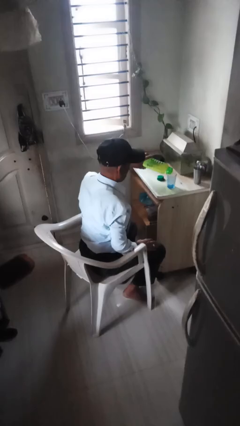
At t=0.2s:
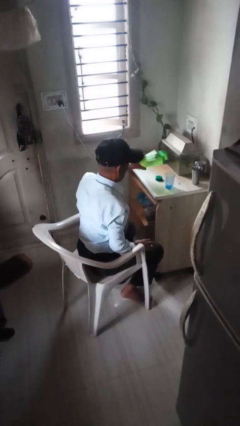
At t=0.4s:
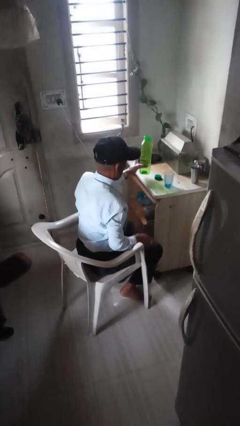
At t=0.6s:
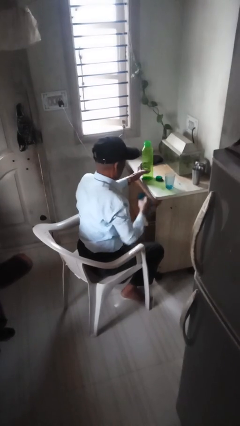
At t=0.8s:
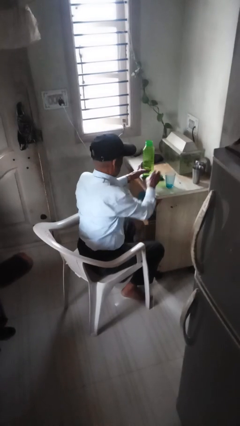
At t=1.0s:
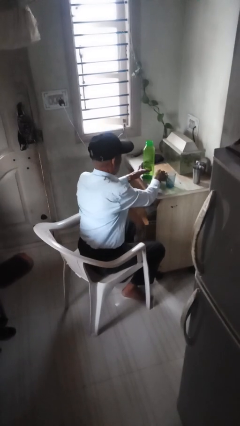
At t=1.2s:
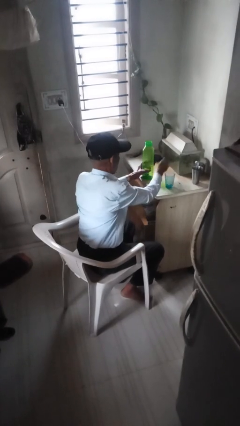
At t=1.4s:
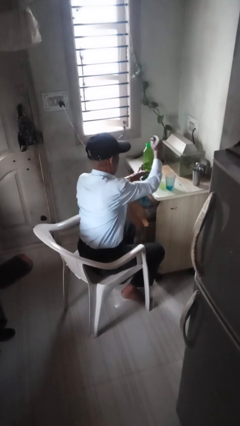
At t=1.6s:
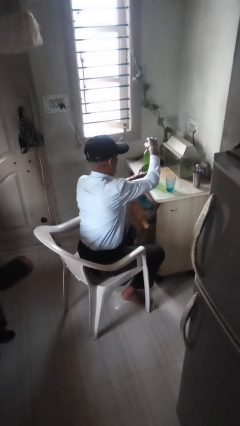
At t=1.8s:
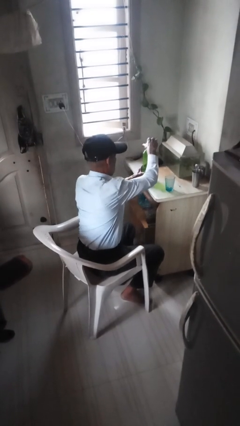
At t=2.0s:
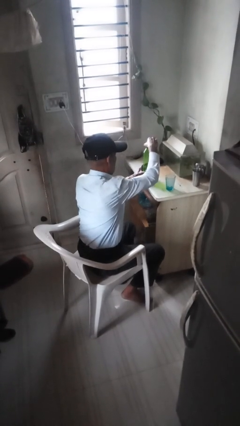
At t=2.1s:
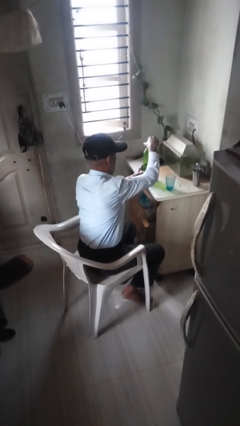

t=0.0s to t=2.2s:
person screws lid to bottle

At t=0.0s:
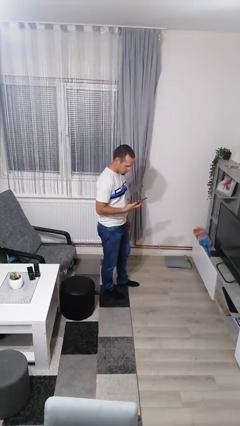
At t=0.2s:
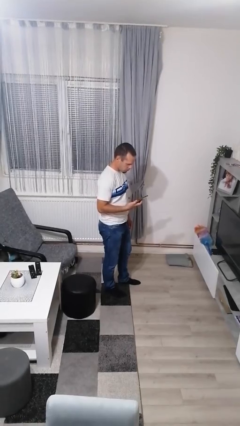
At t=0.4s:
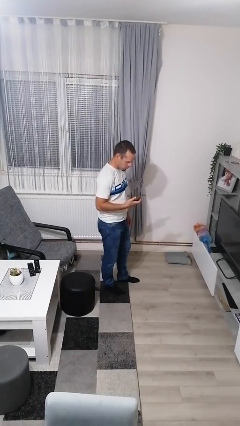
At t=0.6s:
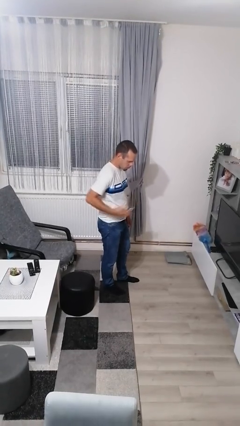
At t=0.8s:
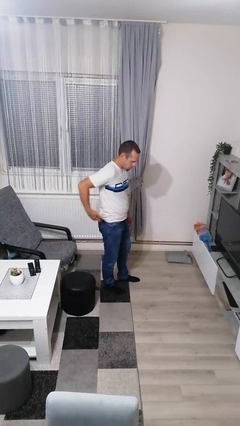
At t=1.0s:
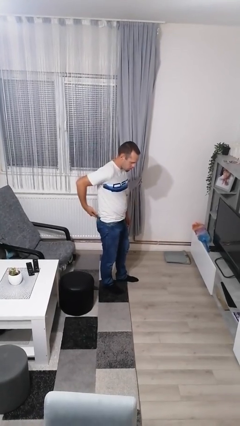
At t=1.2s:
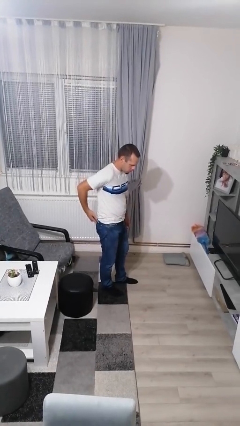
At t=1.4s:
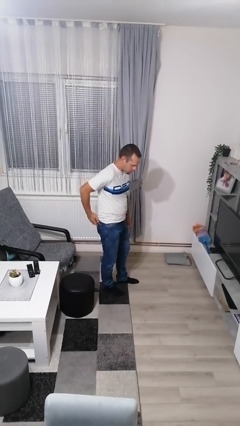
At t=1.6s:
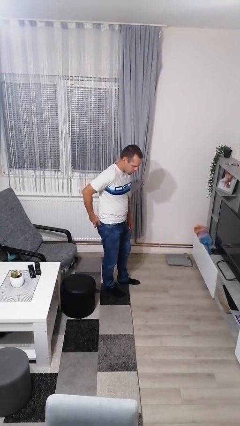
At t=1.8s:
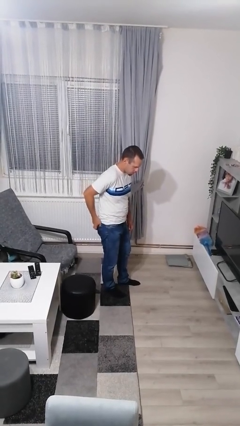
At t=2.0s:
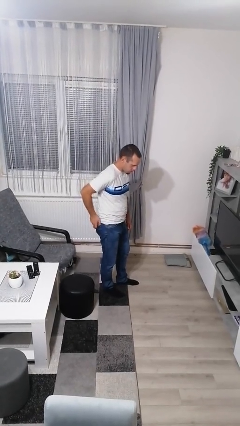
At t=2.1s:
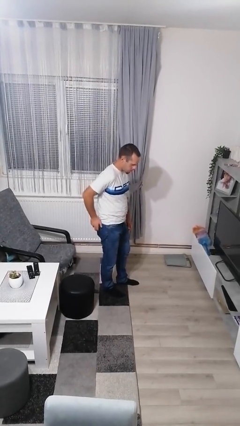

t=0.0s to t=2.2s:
person puts phone into pocket

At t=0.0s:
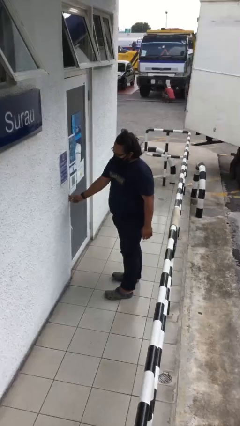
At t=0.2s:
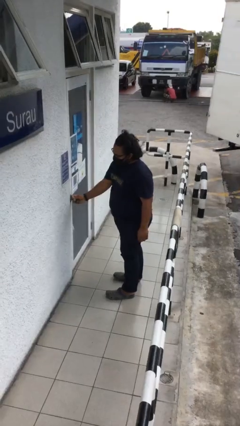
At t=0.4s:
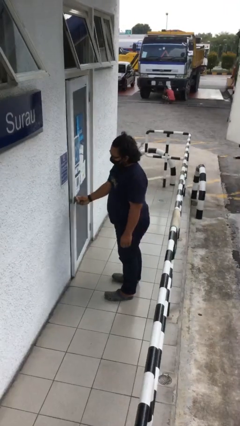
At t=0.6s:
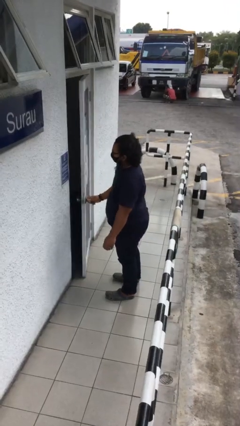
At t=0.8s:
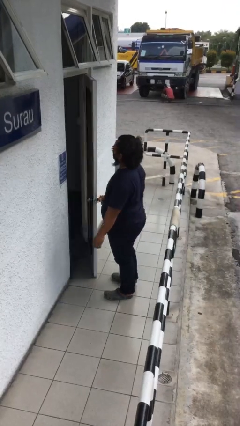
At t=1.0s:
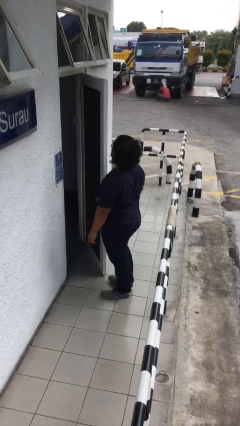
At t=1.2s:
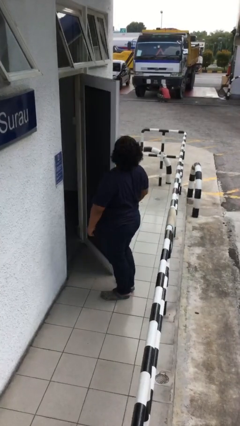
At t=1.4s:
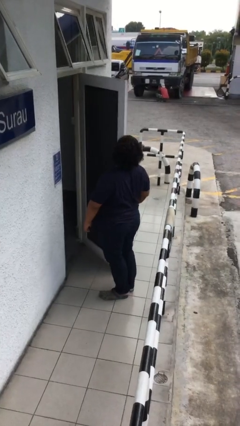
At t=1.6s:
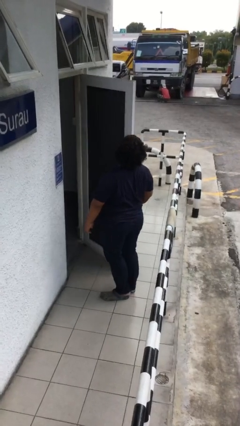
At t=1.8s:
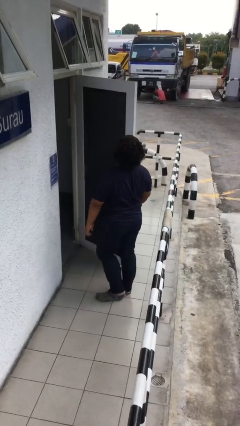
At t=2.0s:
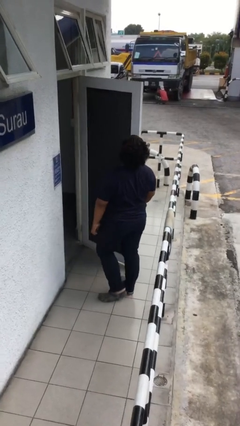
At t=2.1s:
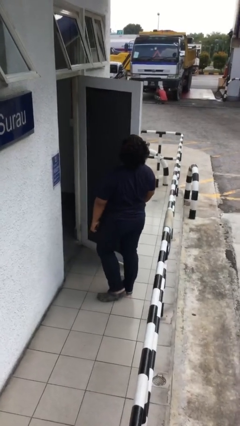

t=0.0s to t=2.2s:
person opens facility door

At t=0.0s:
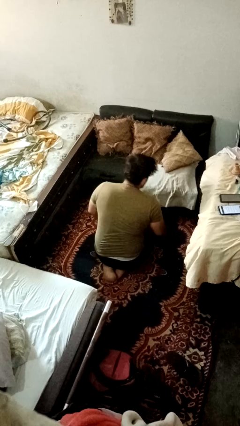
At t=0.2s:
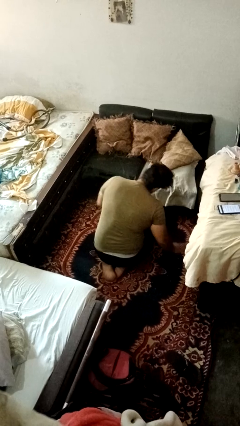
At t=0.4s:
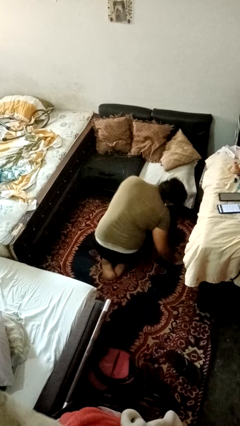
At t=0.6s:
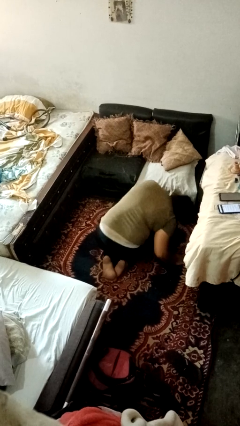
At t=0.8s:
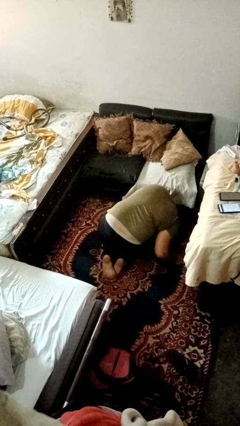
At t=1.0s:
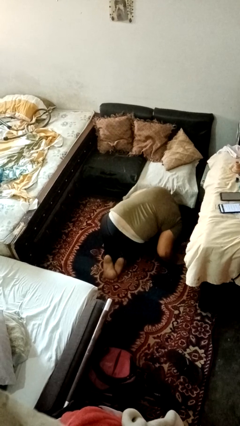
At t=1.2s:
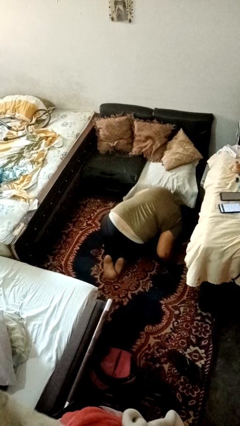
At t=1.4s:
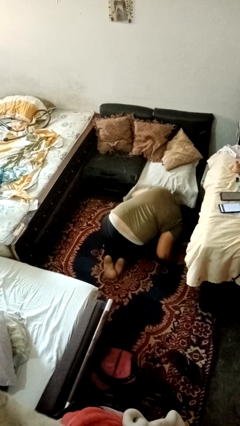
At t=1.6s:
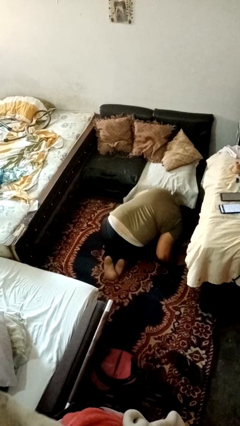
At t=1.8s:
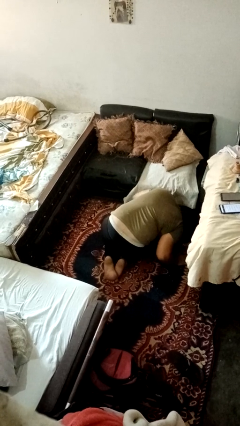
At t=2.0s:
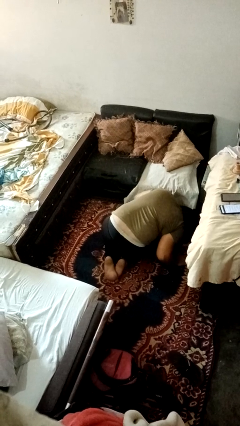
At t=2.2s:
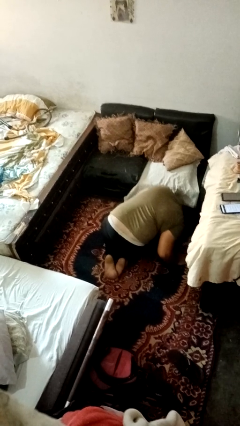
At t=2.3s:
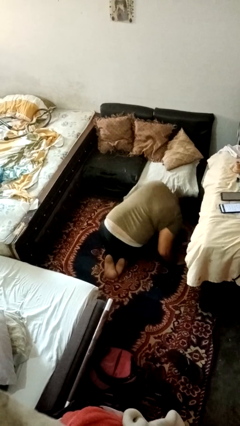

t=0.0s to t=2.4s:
person searches under couch

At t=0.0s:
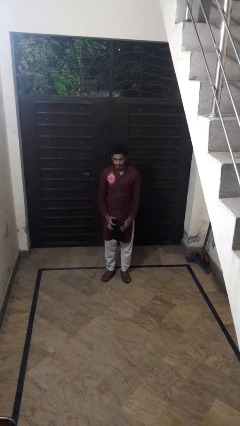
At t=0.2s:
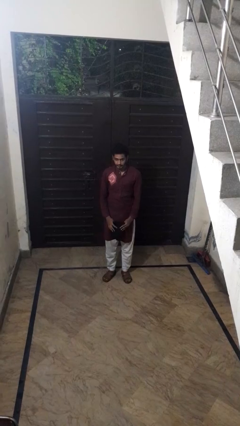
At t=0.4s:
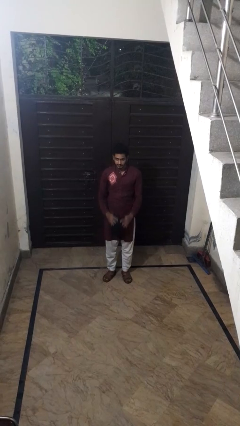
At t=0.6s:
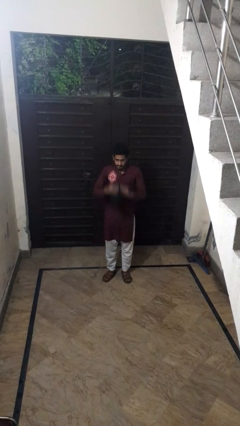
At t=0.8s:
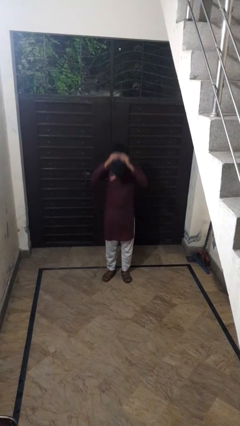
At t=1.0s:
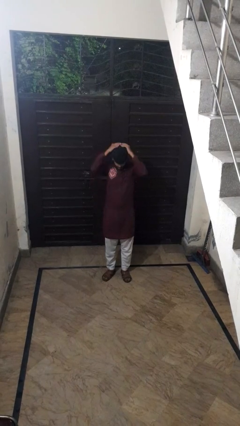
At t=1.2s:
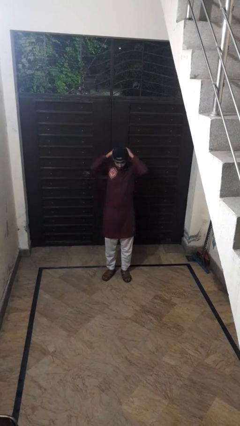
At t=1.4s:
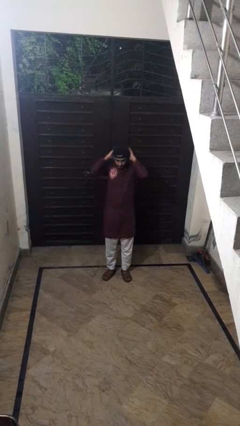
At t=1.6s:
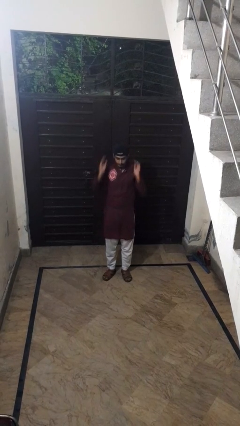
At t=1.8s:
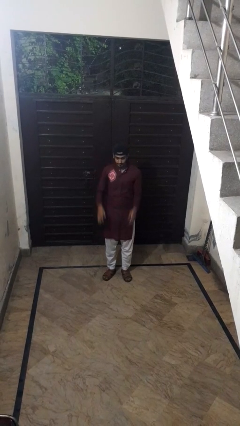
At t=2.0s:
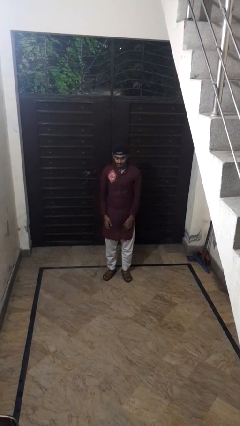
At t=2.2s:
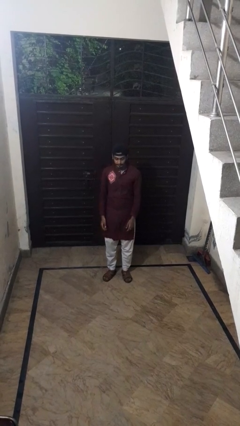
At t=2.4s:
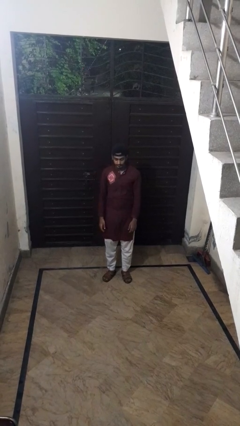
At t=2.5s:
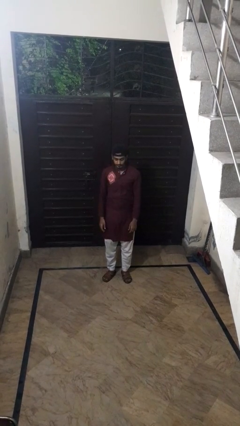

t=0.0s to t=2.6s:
person puts on hat

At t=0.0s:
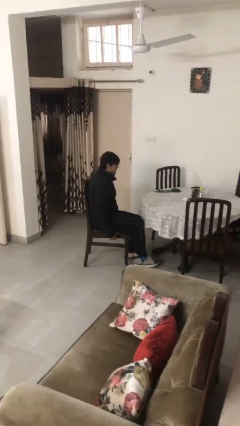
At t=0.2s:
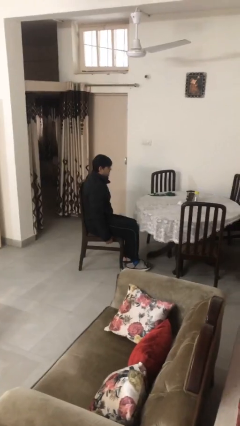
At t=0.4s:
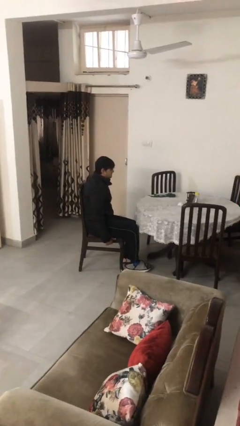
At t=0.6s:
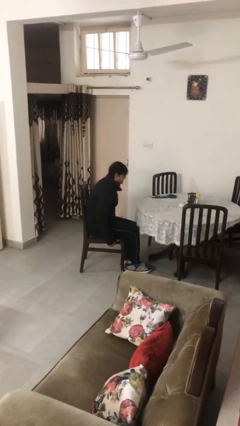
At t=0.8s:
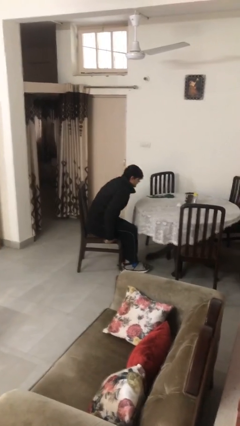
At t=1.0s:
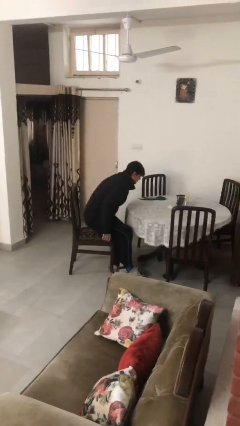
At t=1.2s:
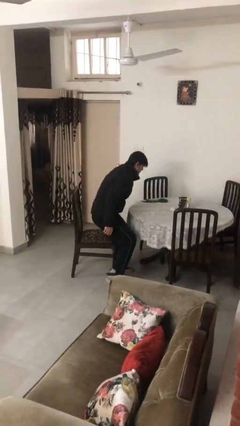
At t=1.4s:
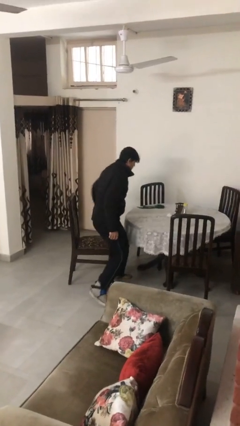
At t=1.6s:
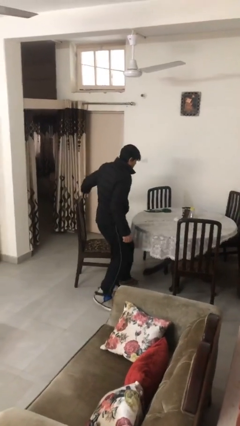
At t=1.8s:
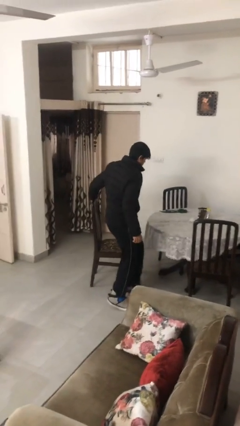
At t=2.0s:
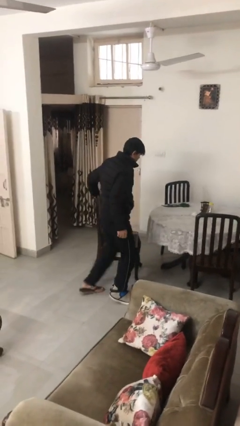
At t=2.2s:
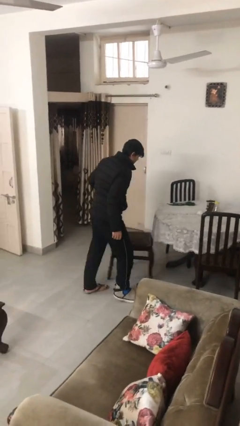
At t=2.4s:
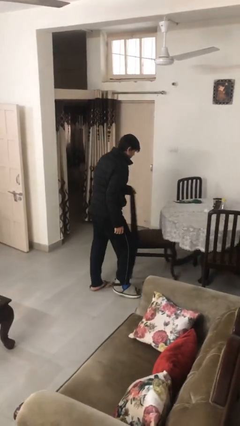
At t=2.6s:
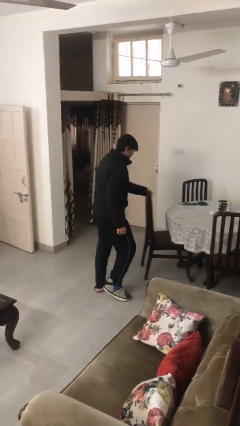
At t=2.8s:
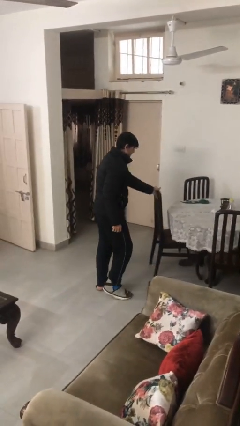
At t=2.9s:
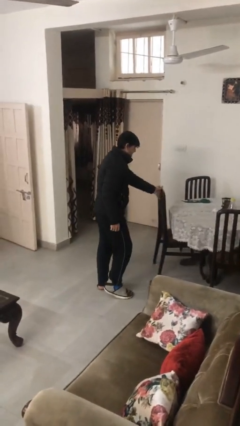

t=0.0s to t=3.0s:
person stands up

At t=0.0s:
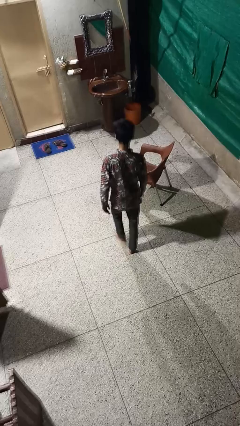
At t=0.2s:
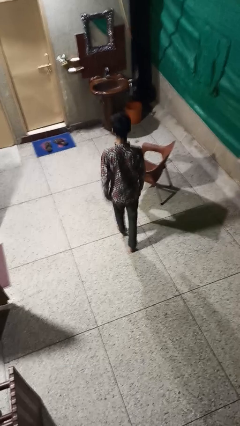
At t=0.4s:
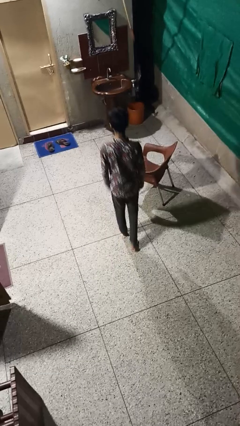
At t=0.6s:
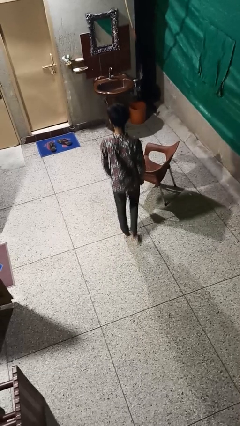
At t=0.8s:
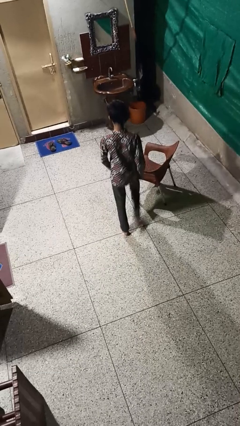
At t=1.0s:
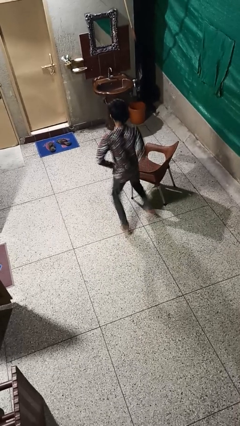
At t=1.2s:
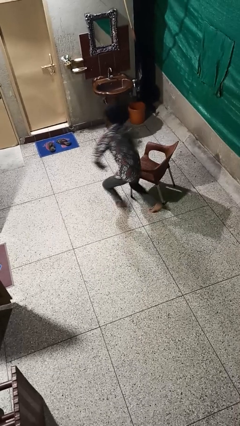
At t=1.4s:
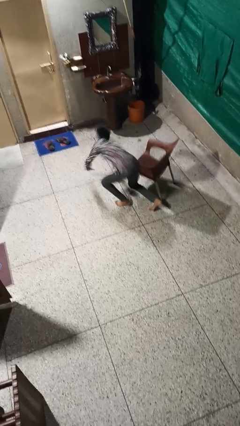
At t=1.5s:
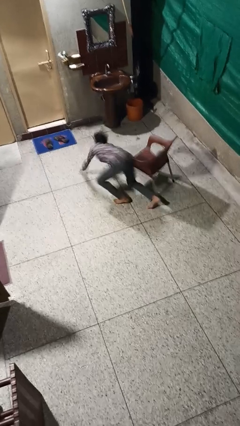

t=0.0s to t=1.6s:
person trips on object on floor

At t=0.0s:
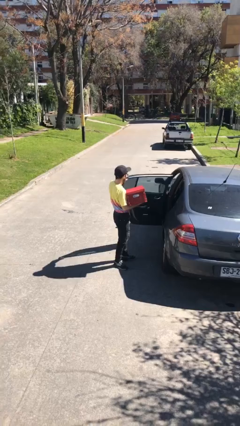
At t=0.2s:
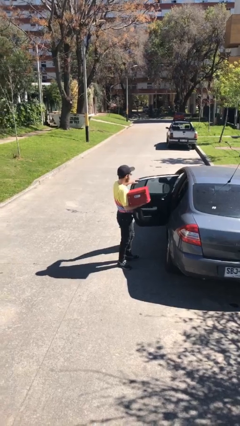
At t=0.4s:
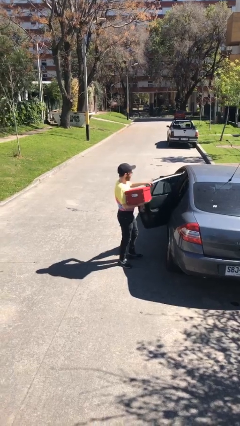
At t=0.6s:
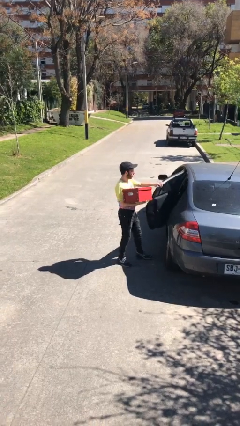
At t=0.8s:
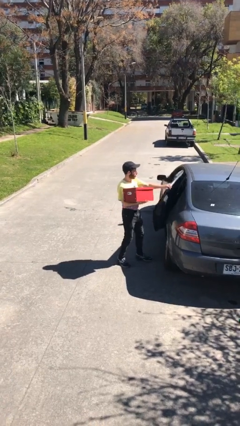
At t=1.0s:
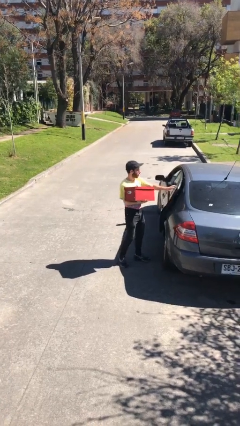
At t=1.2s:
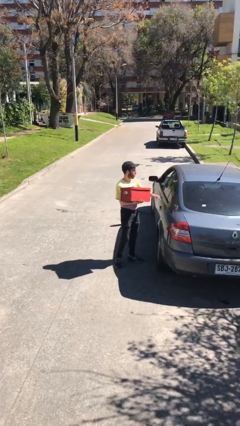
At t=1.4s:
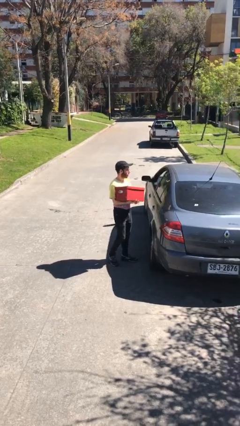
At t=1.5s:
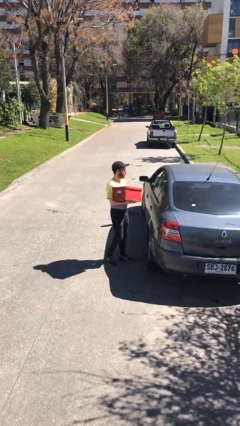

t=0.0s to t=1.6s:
person closes car door
